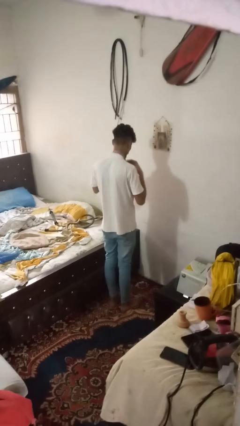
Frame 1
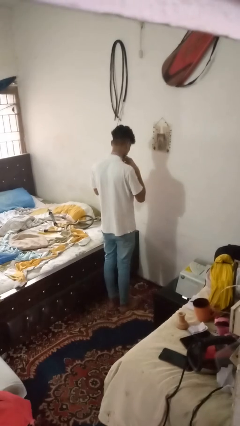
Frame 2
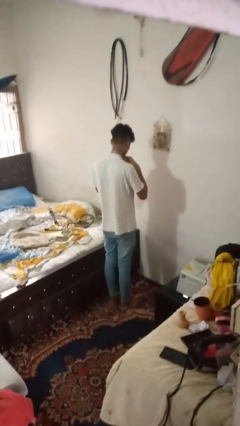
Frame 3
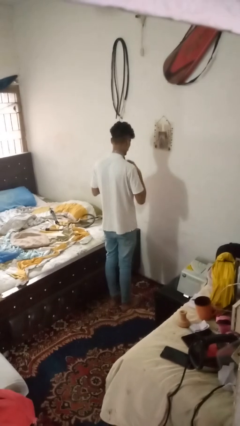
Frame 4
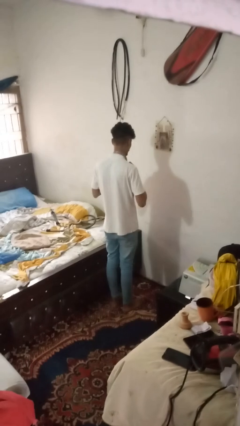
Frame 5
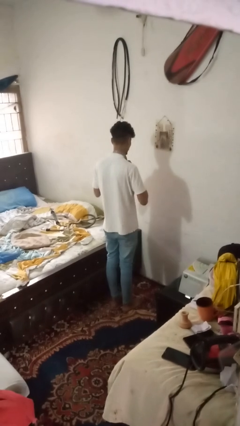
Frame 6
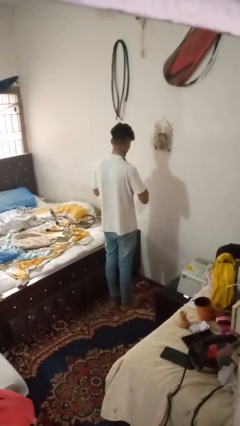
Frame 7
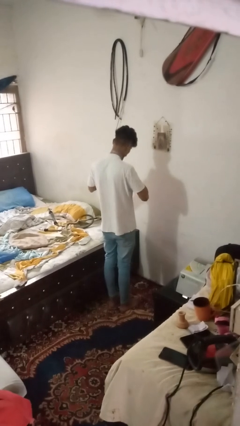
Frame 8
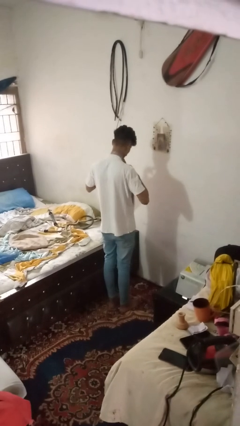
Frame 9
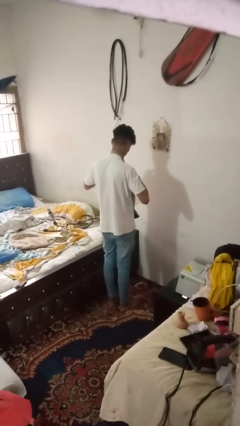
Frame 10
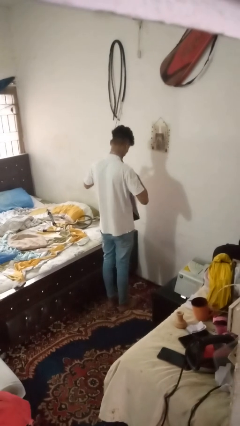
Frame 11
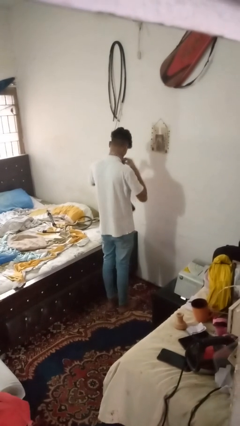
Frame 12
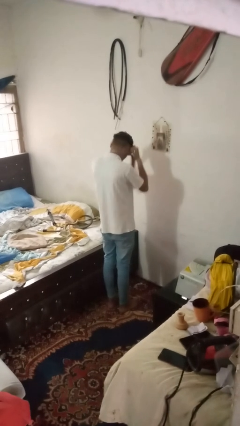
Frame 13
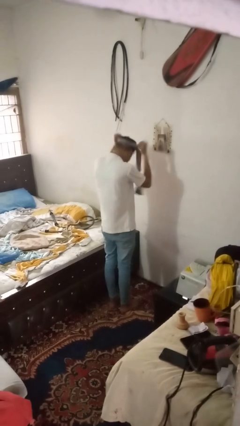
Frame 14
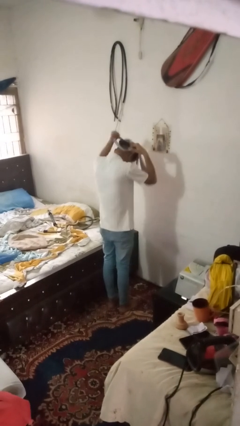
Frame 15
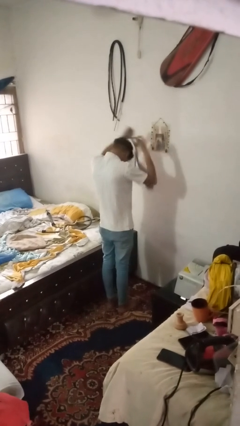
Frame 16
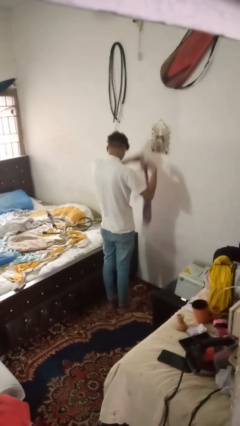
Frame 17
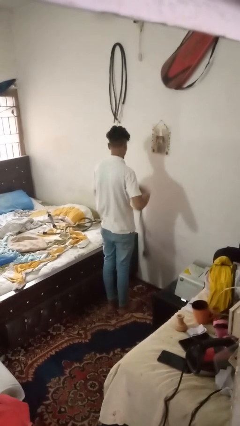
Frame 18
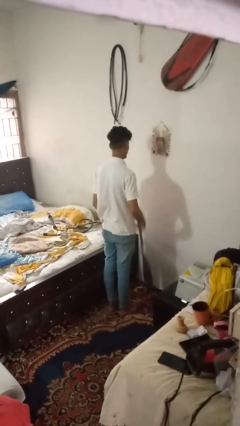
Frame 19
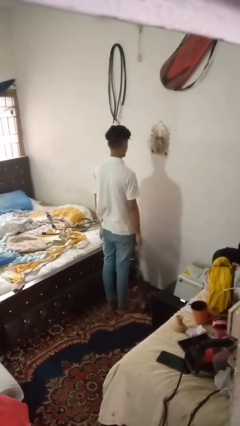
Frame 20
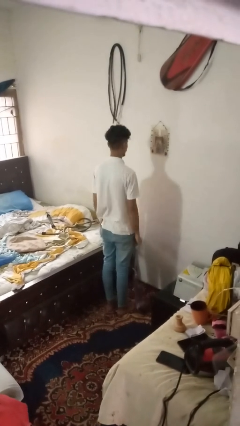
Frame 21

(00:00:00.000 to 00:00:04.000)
person takes off necktie

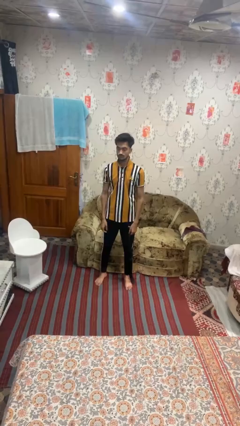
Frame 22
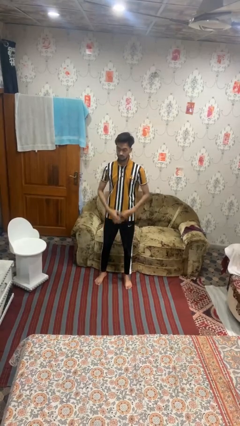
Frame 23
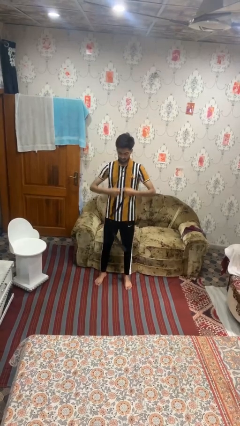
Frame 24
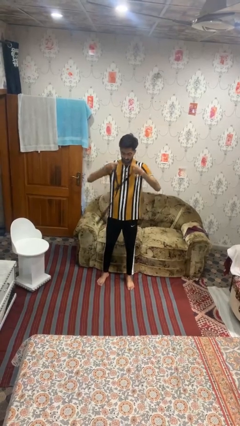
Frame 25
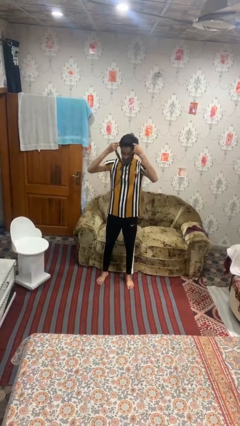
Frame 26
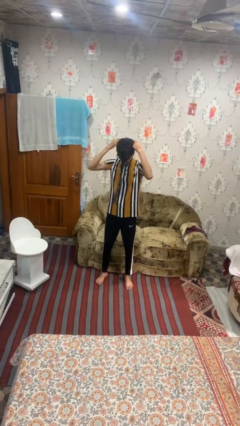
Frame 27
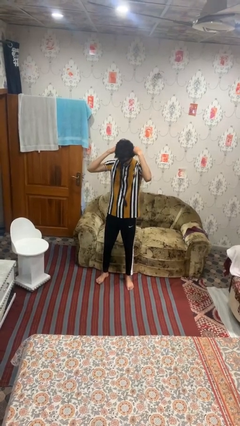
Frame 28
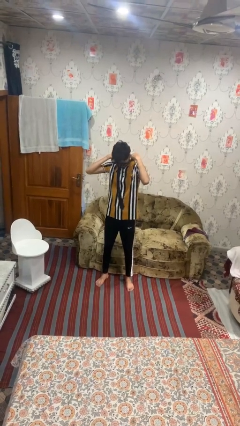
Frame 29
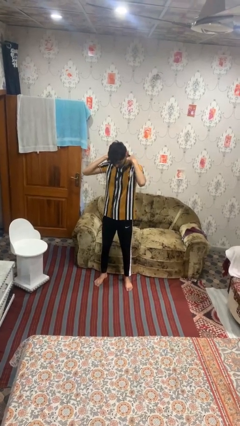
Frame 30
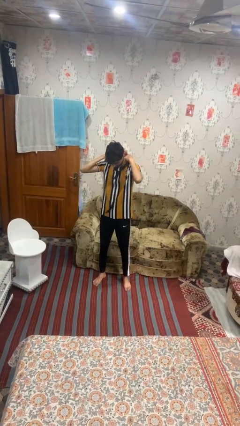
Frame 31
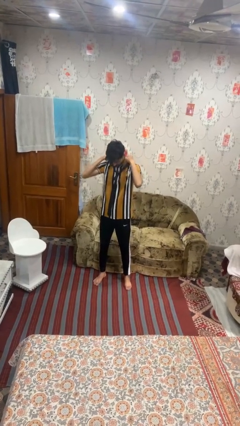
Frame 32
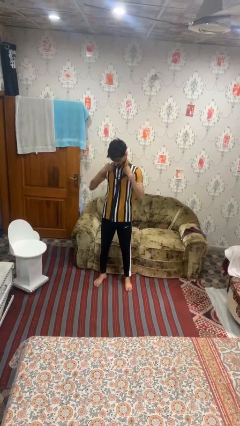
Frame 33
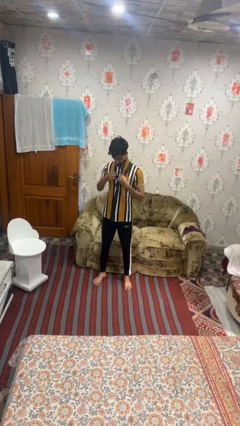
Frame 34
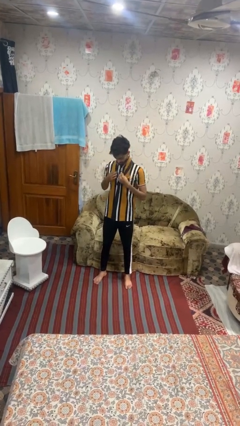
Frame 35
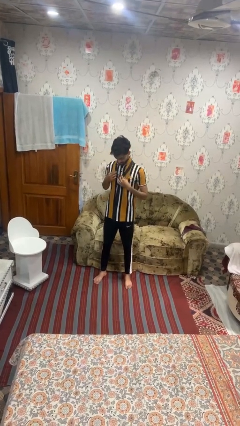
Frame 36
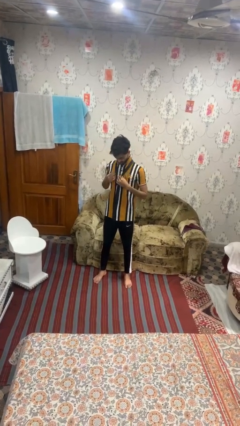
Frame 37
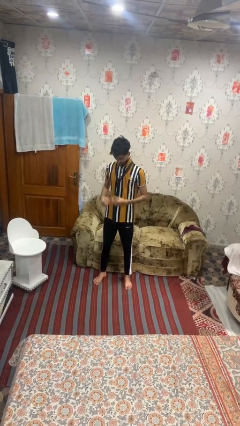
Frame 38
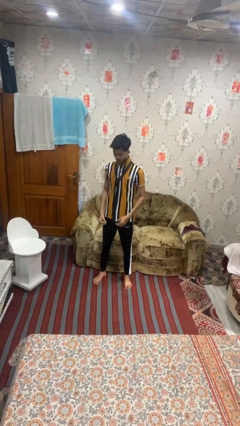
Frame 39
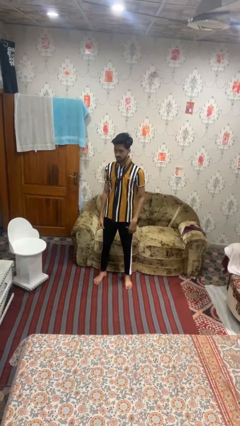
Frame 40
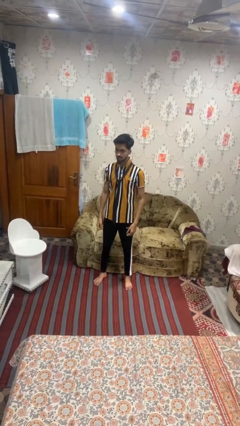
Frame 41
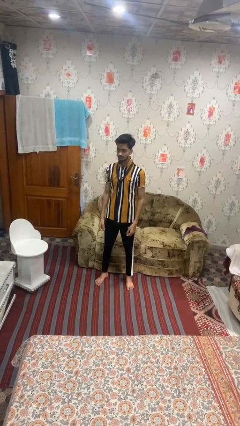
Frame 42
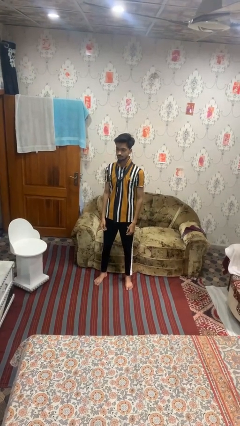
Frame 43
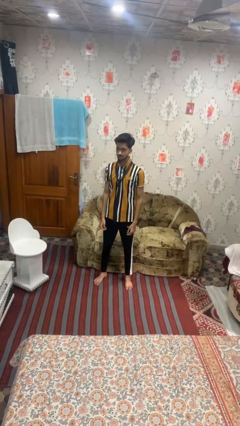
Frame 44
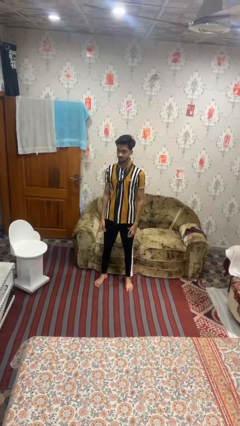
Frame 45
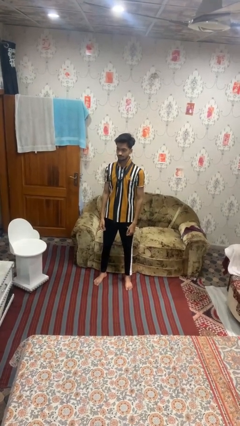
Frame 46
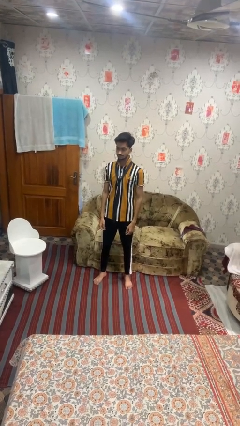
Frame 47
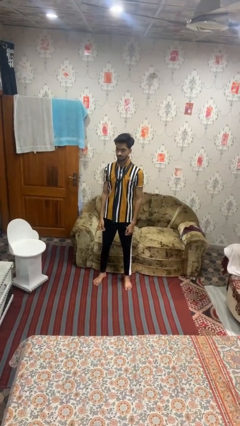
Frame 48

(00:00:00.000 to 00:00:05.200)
person puts on necktie

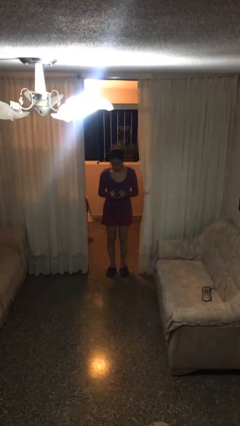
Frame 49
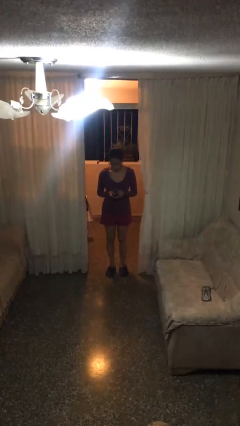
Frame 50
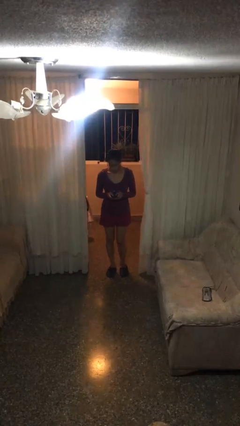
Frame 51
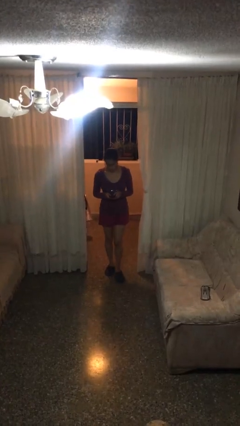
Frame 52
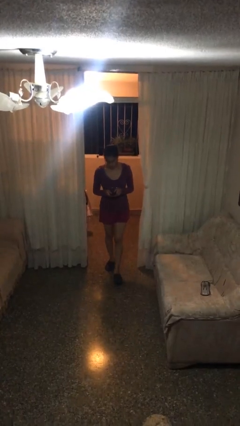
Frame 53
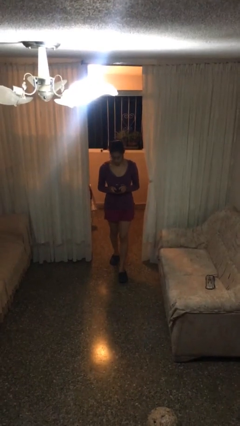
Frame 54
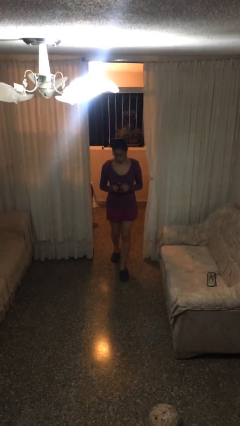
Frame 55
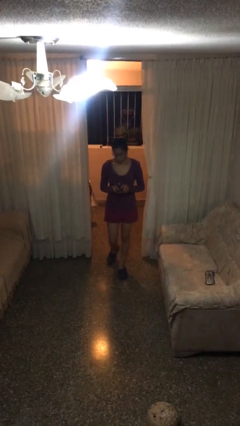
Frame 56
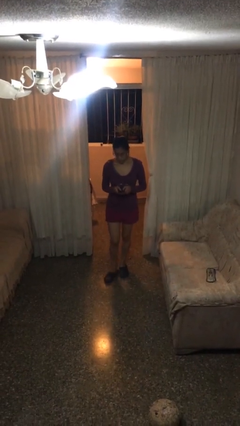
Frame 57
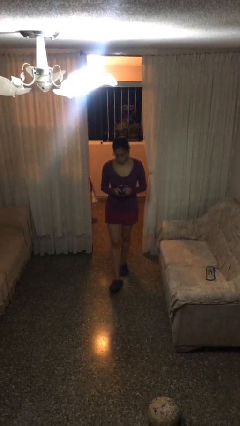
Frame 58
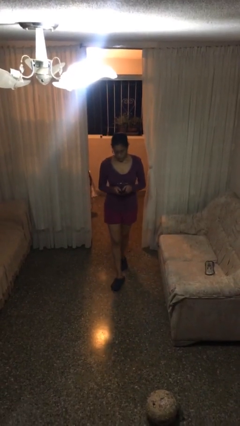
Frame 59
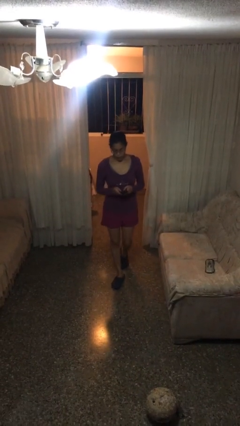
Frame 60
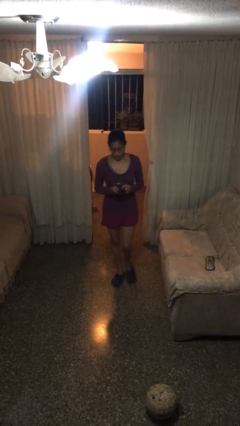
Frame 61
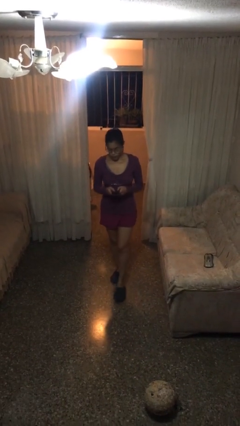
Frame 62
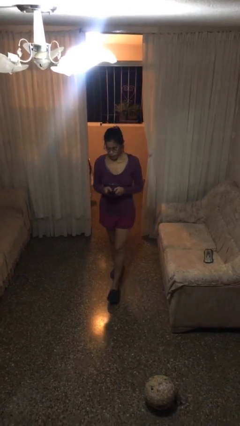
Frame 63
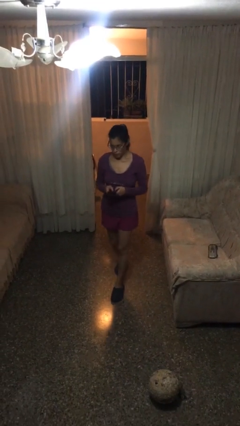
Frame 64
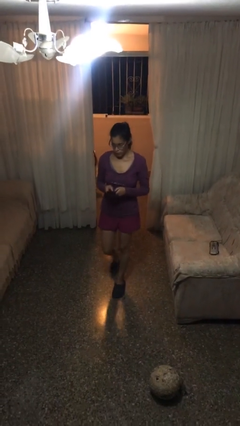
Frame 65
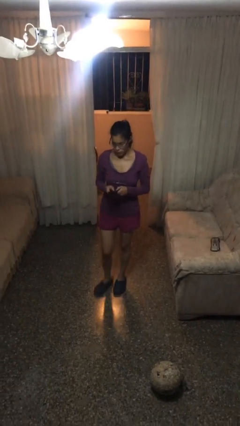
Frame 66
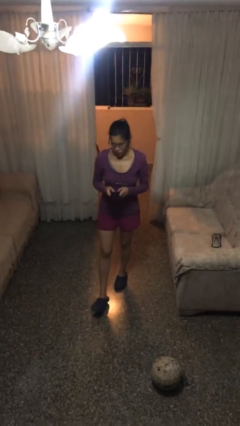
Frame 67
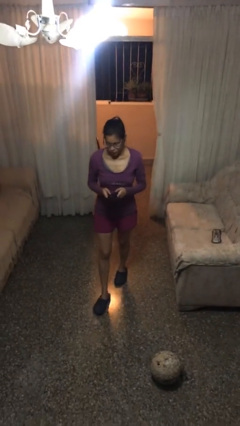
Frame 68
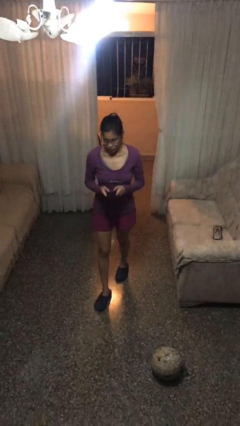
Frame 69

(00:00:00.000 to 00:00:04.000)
person texts on phone

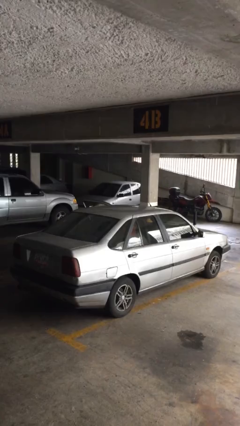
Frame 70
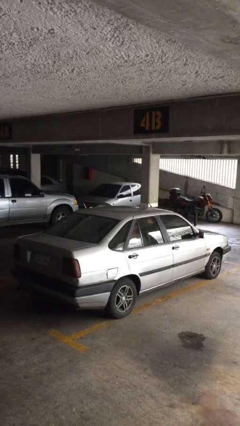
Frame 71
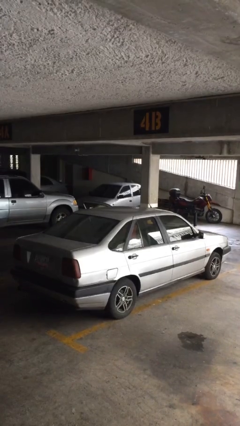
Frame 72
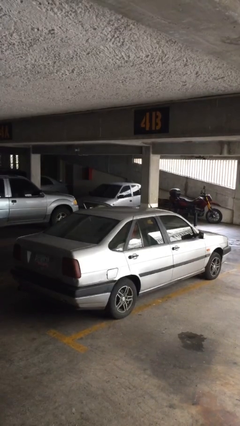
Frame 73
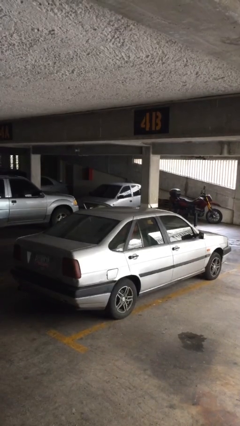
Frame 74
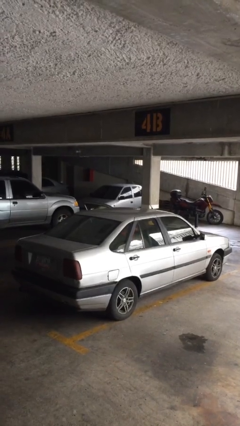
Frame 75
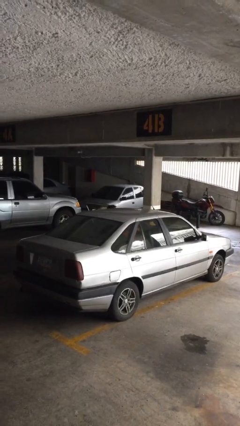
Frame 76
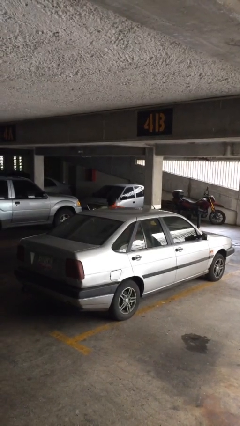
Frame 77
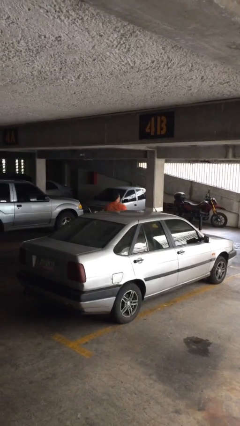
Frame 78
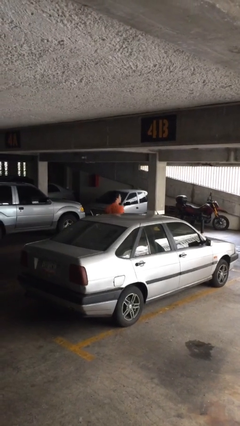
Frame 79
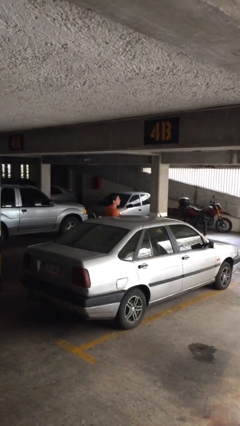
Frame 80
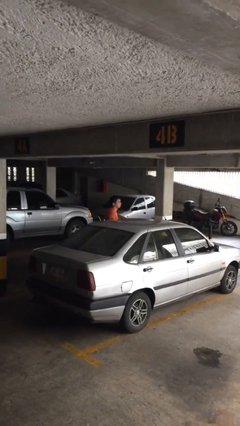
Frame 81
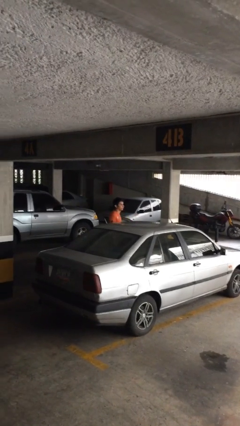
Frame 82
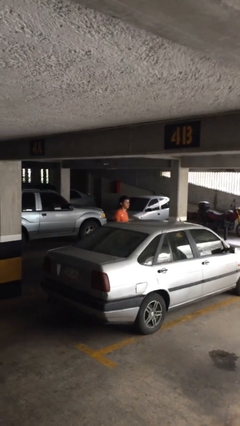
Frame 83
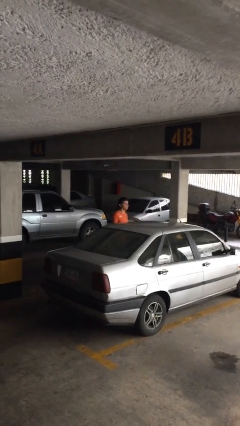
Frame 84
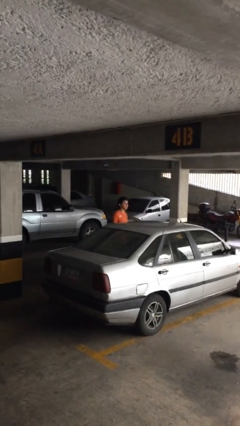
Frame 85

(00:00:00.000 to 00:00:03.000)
person exits car

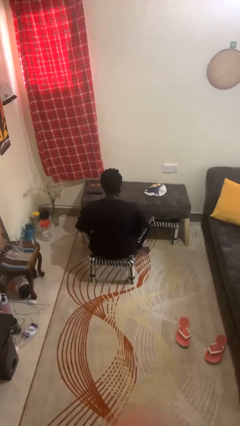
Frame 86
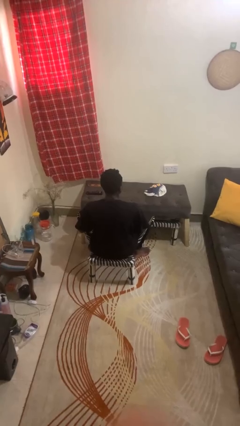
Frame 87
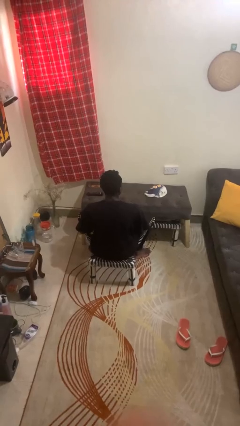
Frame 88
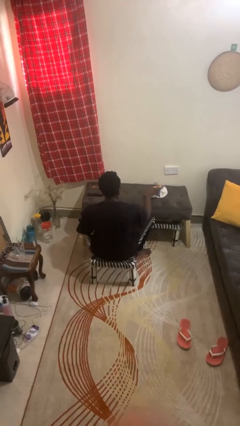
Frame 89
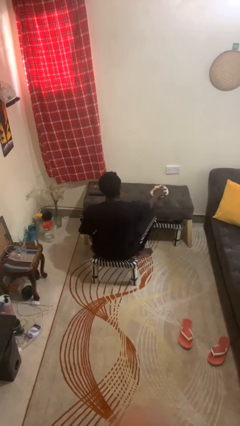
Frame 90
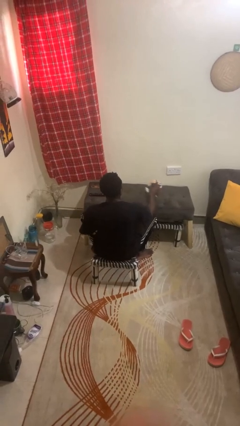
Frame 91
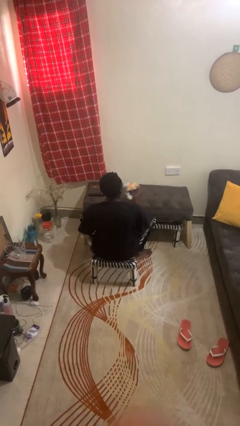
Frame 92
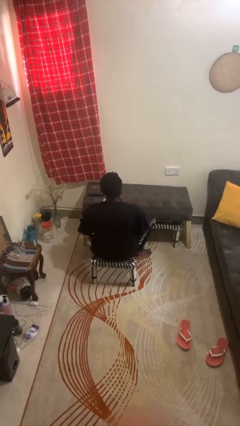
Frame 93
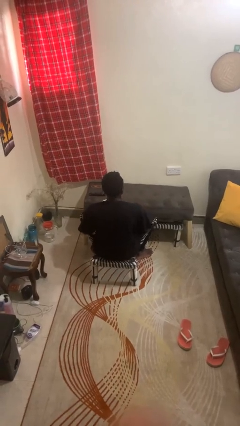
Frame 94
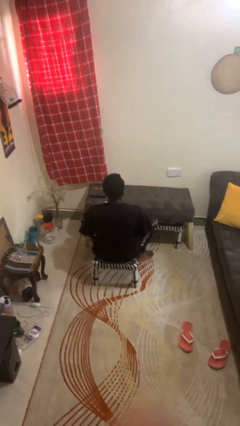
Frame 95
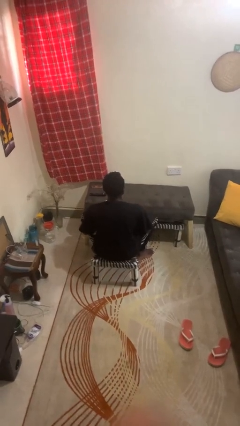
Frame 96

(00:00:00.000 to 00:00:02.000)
person picks up object from table
